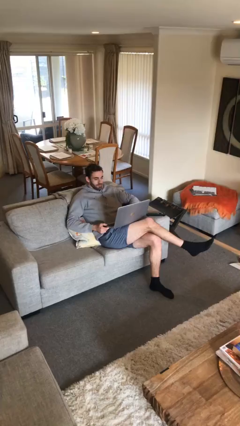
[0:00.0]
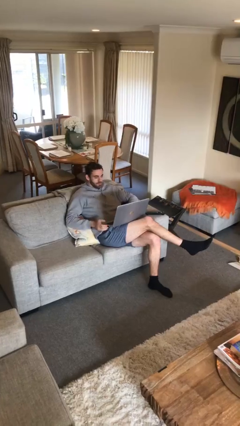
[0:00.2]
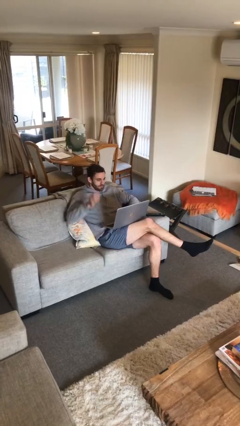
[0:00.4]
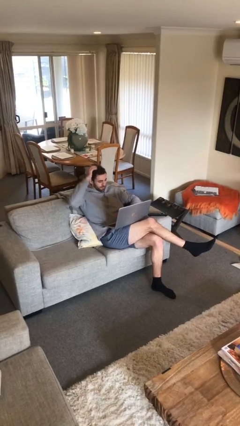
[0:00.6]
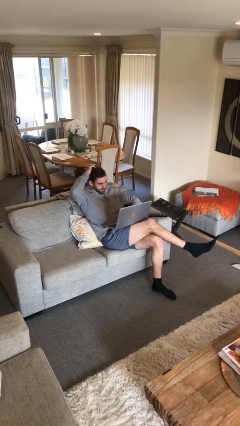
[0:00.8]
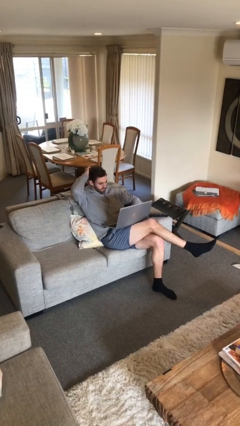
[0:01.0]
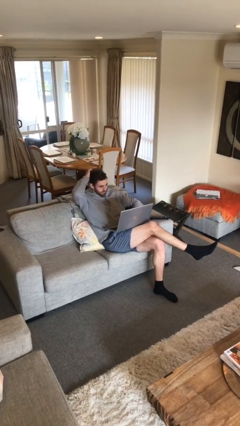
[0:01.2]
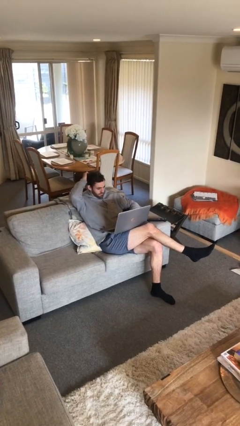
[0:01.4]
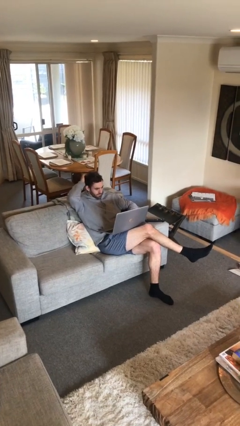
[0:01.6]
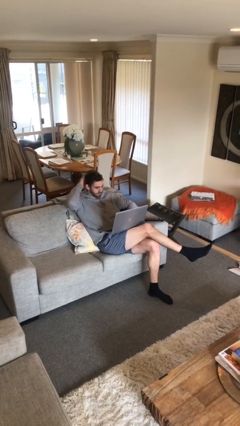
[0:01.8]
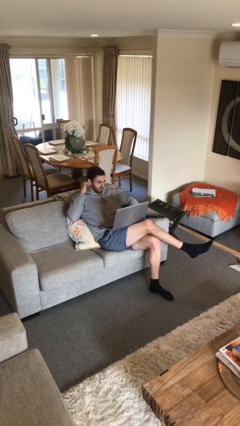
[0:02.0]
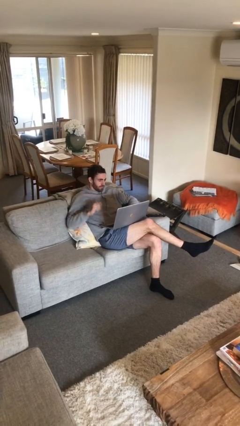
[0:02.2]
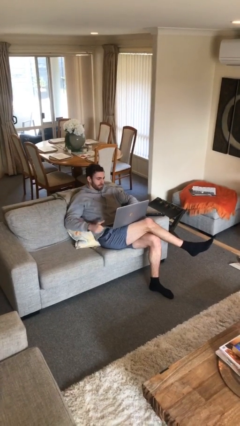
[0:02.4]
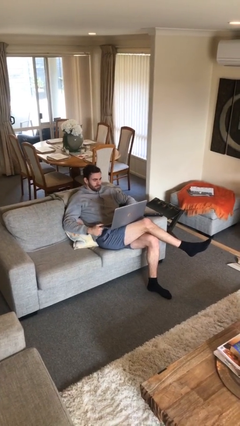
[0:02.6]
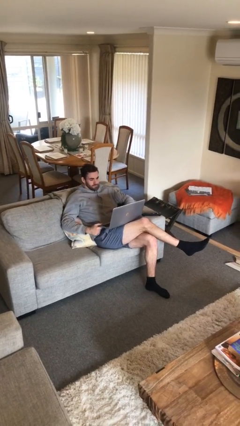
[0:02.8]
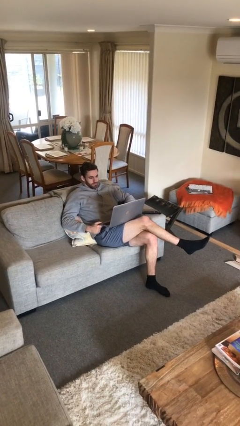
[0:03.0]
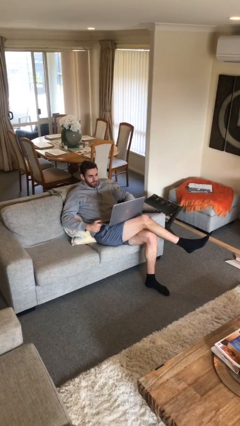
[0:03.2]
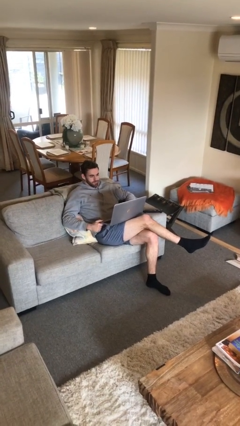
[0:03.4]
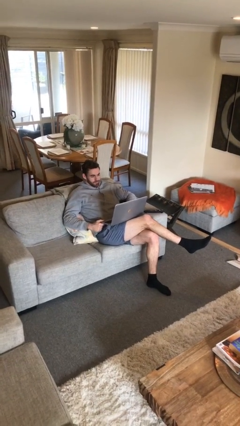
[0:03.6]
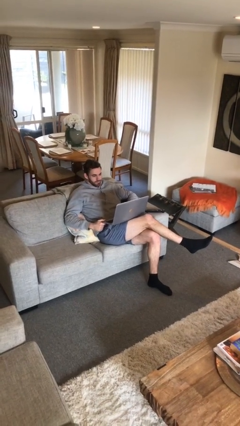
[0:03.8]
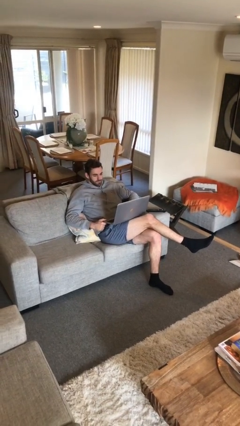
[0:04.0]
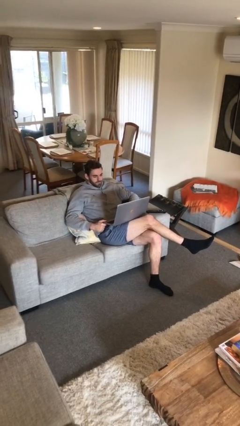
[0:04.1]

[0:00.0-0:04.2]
person interacts with laptop

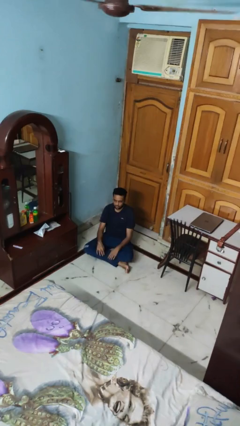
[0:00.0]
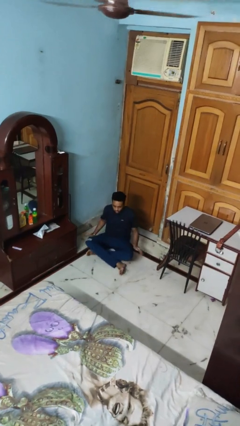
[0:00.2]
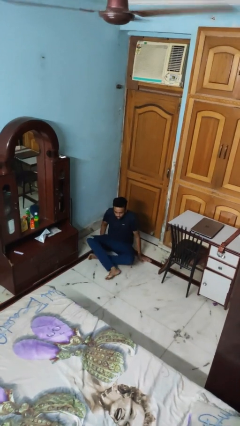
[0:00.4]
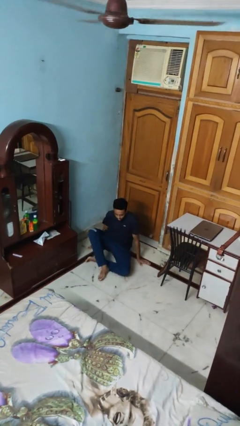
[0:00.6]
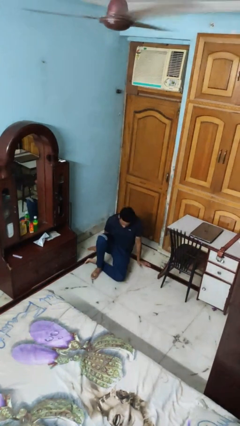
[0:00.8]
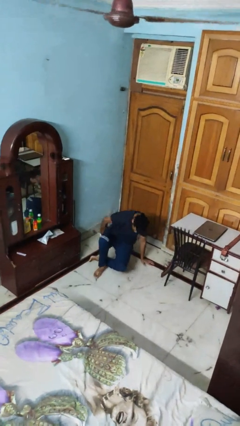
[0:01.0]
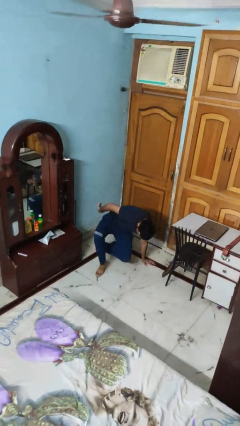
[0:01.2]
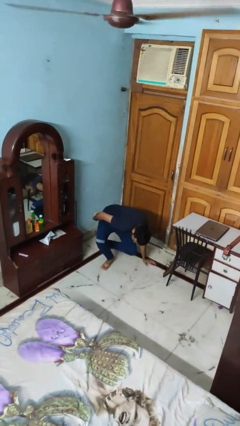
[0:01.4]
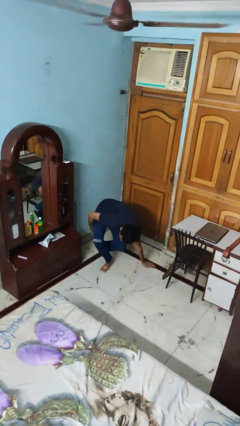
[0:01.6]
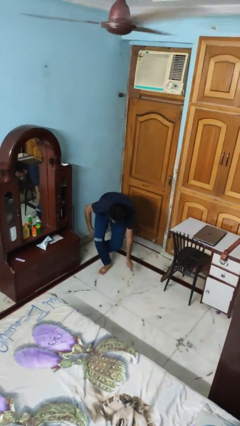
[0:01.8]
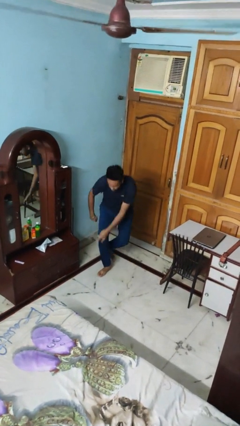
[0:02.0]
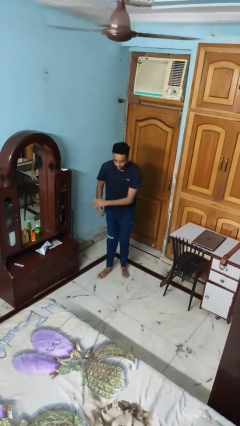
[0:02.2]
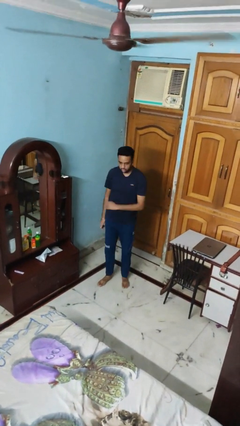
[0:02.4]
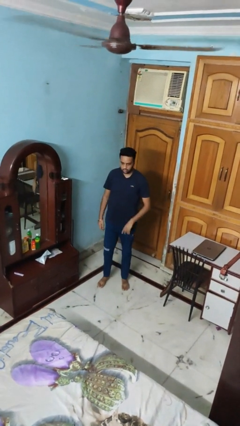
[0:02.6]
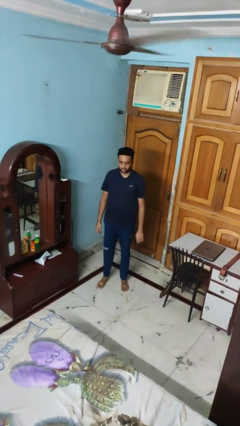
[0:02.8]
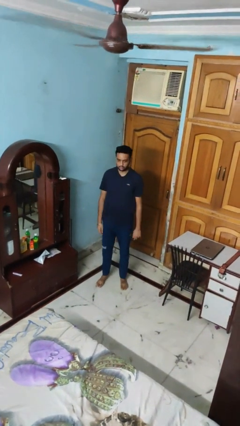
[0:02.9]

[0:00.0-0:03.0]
person stands up from floor

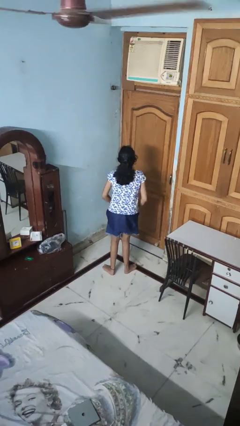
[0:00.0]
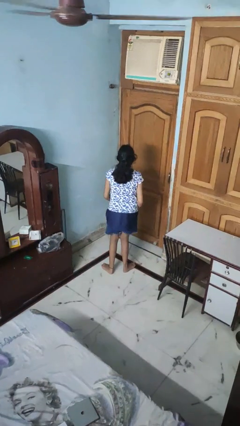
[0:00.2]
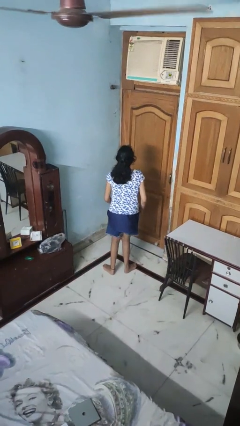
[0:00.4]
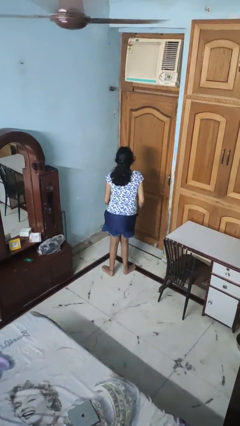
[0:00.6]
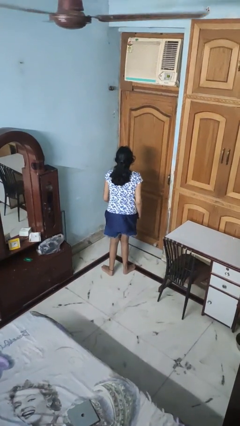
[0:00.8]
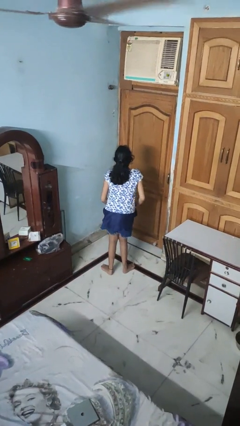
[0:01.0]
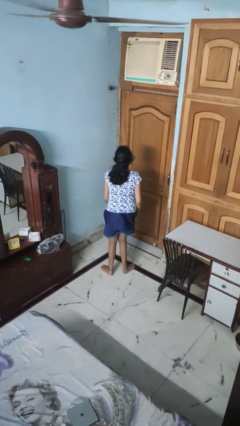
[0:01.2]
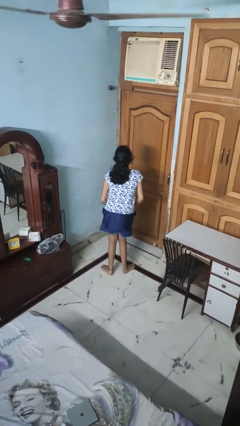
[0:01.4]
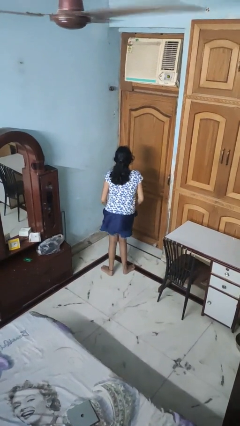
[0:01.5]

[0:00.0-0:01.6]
person wiggles hips

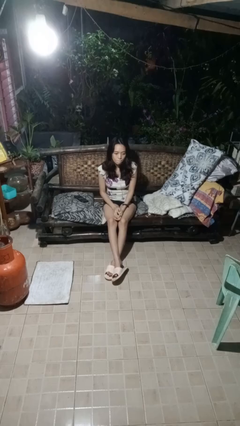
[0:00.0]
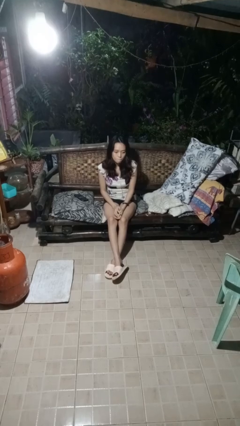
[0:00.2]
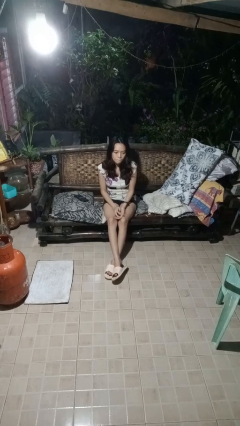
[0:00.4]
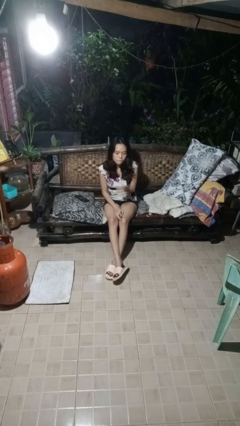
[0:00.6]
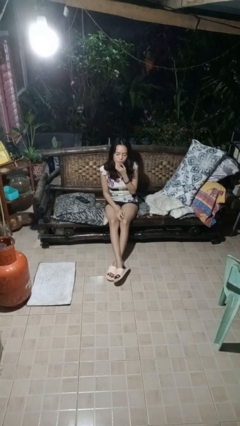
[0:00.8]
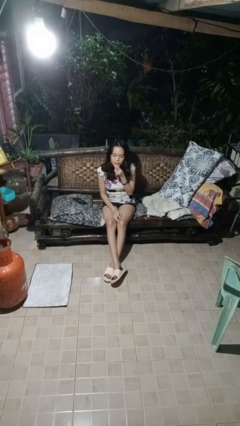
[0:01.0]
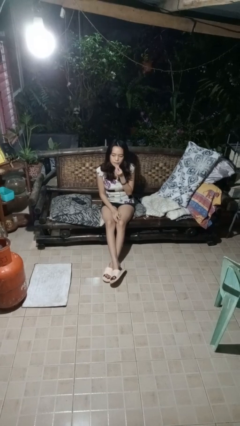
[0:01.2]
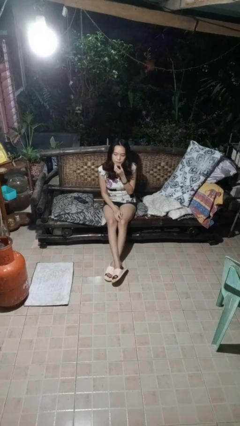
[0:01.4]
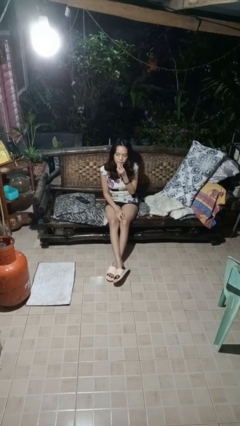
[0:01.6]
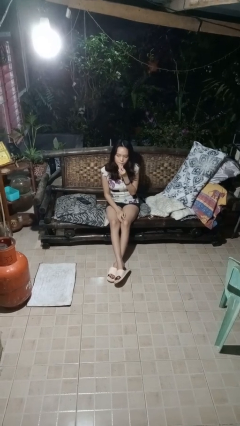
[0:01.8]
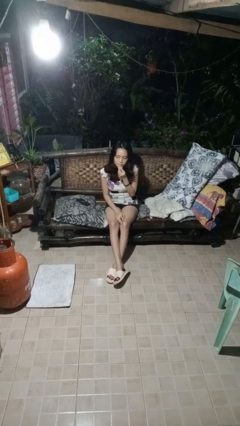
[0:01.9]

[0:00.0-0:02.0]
person strokes chin

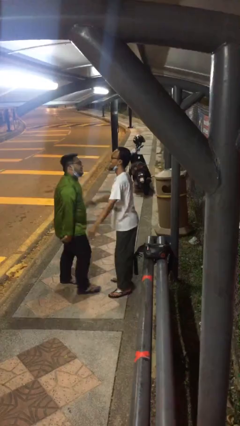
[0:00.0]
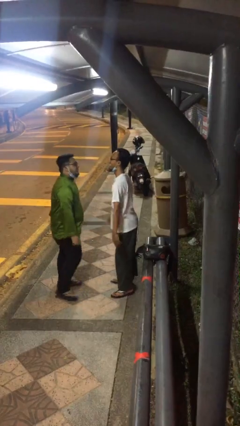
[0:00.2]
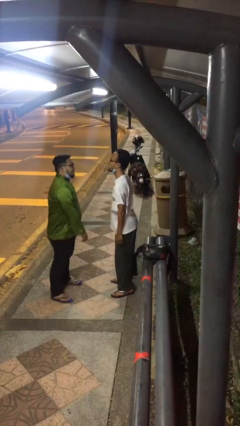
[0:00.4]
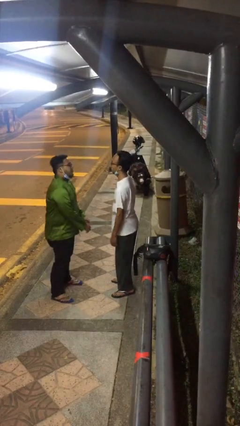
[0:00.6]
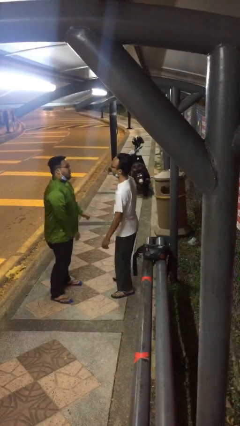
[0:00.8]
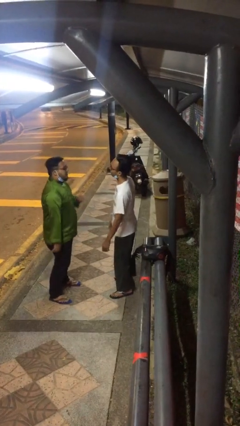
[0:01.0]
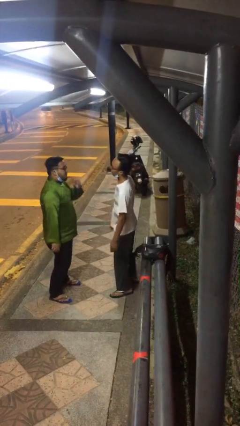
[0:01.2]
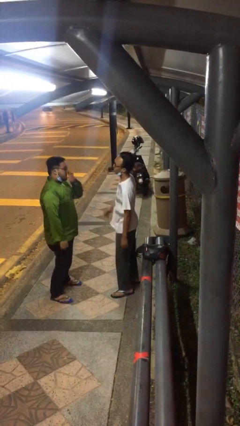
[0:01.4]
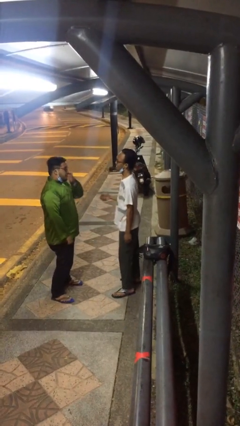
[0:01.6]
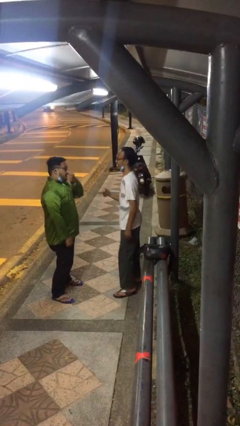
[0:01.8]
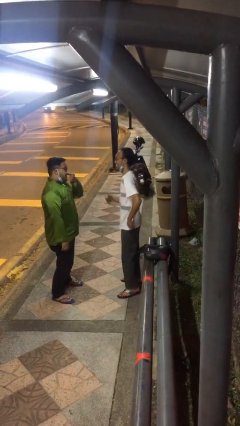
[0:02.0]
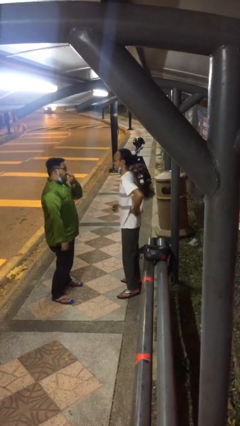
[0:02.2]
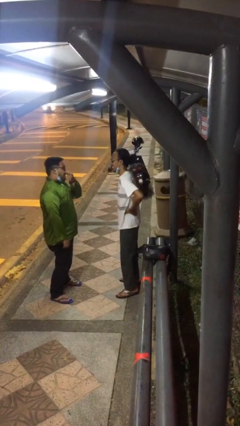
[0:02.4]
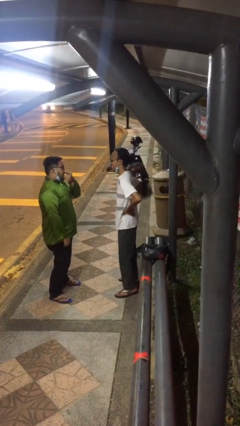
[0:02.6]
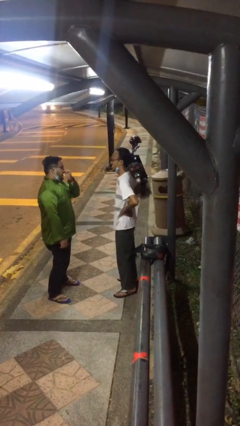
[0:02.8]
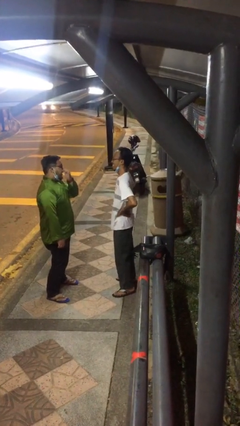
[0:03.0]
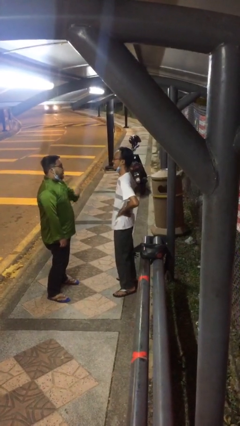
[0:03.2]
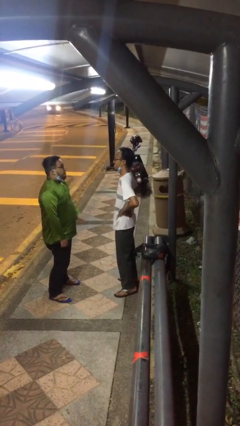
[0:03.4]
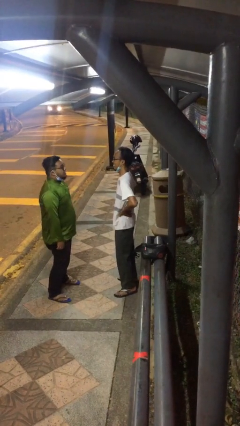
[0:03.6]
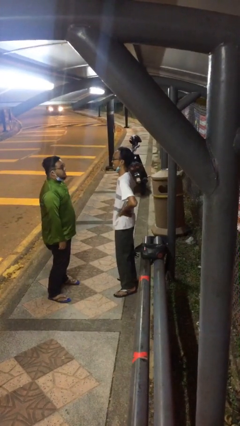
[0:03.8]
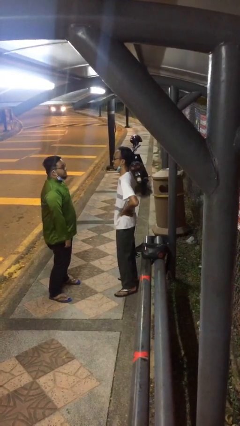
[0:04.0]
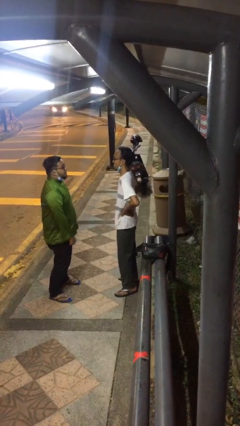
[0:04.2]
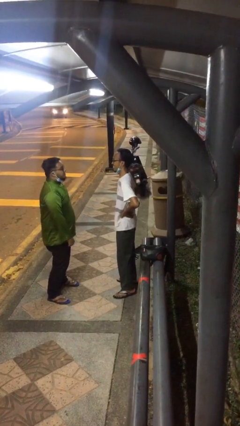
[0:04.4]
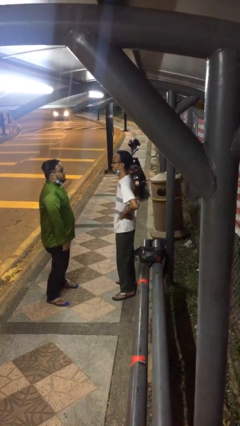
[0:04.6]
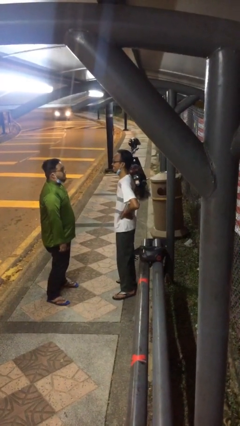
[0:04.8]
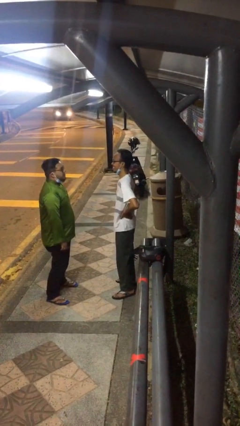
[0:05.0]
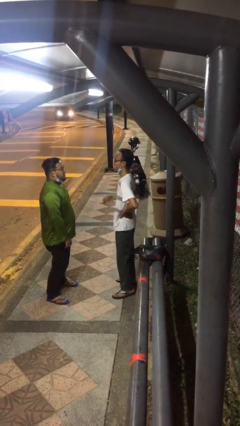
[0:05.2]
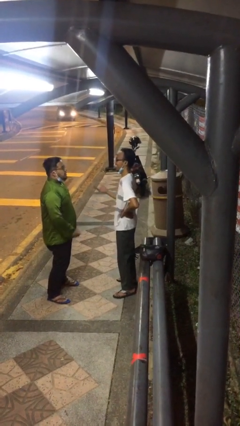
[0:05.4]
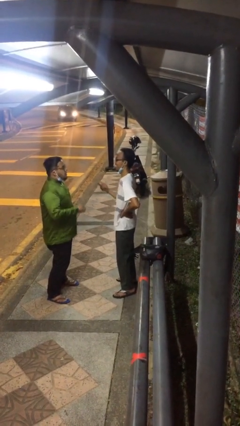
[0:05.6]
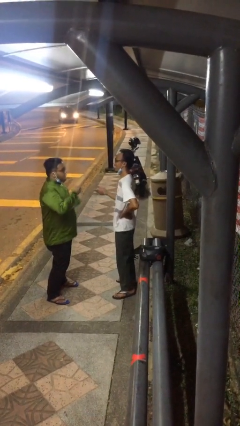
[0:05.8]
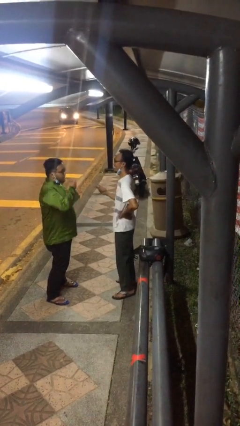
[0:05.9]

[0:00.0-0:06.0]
person talks to person

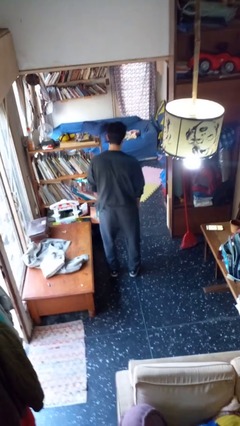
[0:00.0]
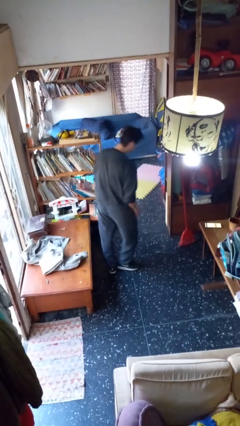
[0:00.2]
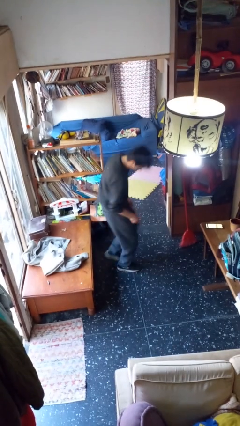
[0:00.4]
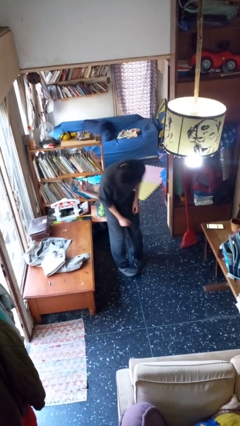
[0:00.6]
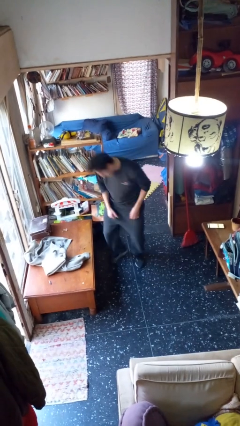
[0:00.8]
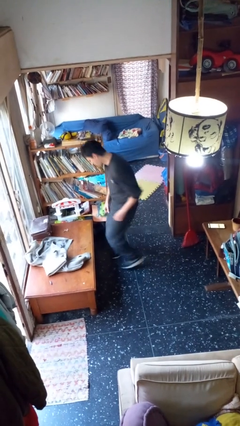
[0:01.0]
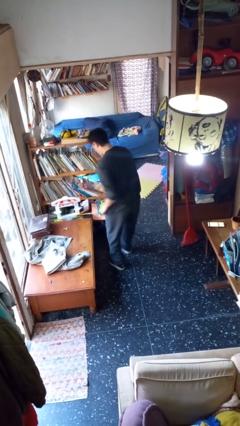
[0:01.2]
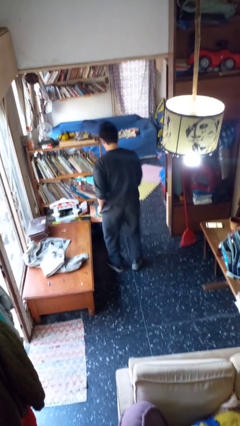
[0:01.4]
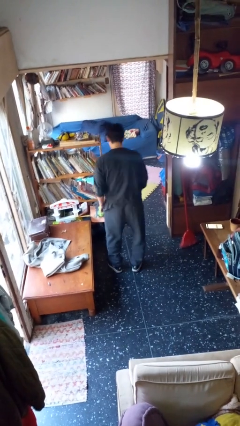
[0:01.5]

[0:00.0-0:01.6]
person twirls
